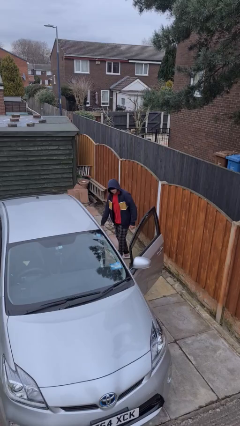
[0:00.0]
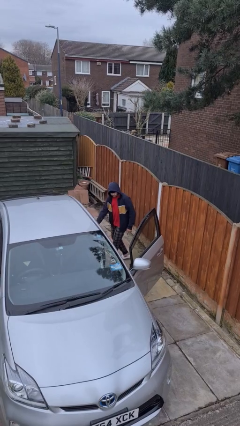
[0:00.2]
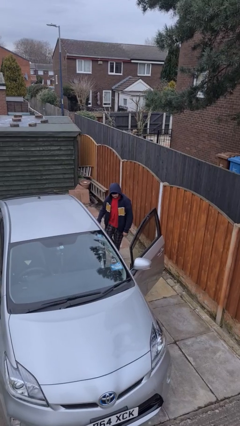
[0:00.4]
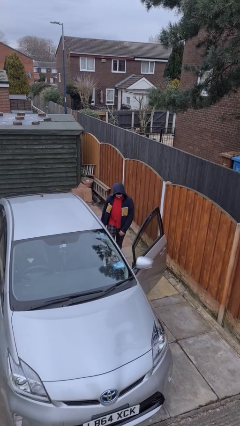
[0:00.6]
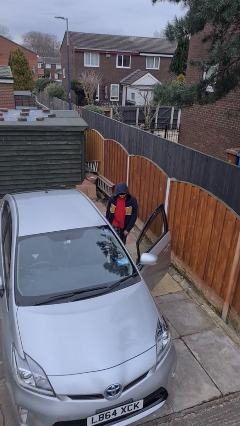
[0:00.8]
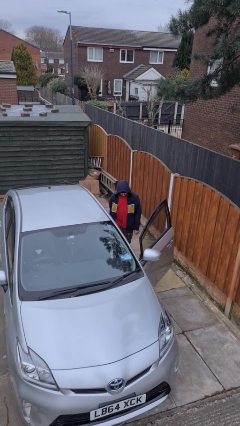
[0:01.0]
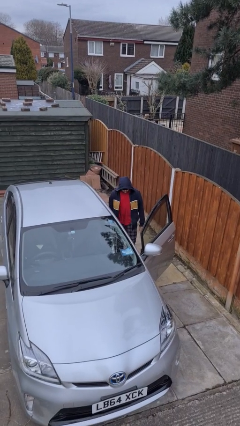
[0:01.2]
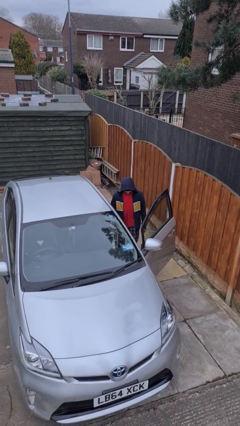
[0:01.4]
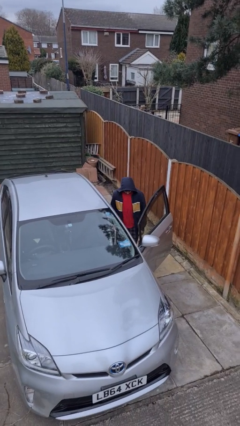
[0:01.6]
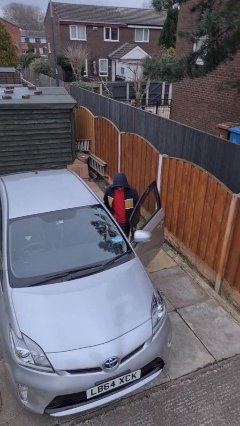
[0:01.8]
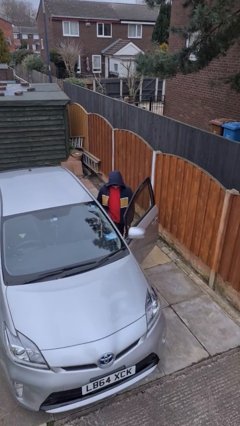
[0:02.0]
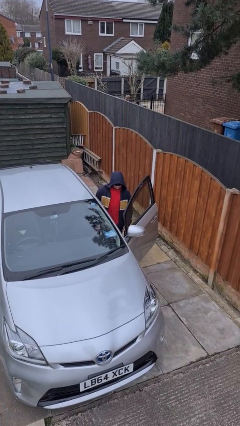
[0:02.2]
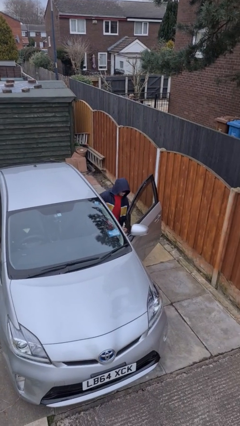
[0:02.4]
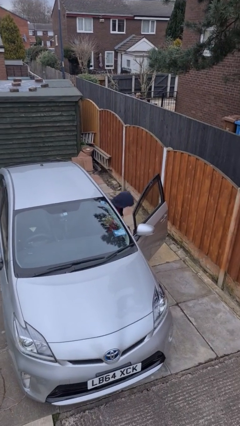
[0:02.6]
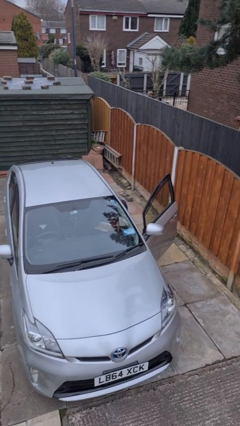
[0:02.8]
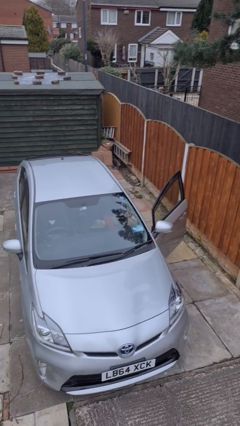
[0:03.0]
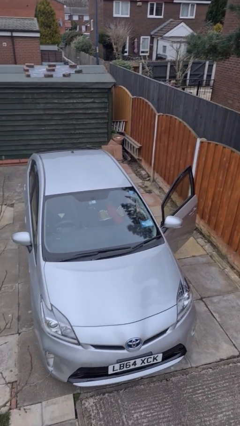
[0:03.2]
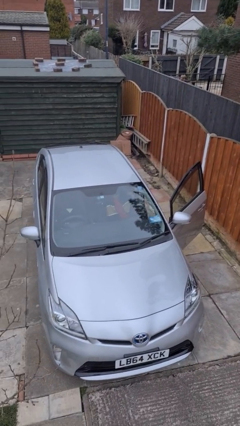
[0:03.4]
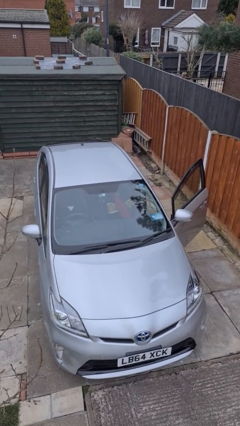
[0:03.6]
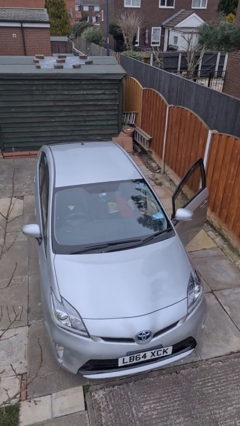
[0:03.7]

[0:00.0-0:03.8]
person enters car

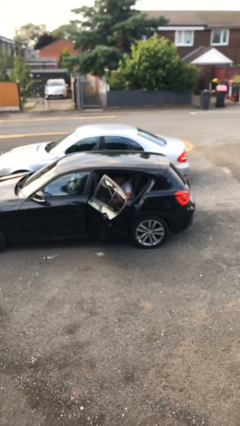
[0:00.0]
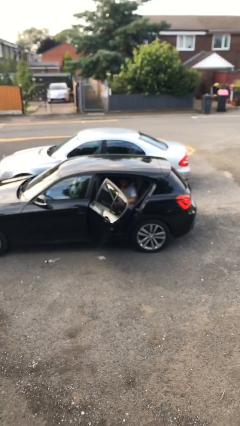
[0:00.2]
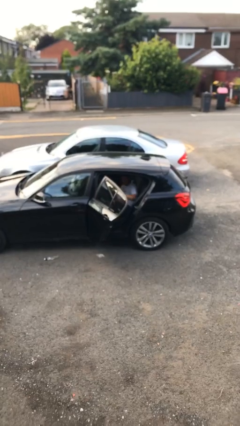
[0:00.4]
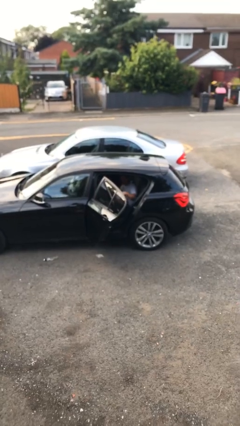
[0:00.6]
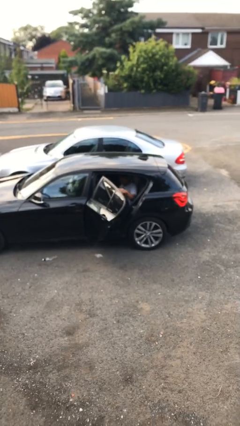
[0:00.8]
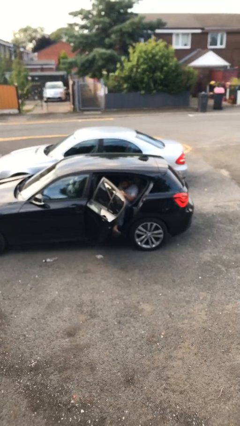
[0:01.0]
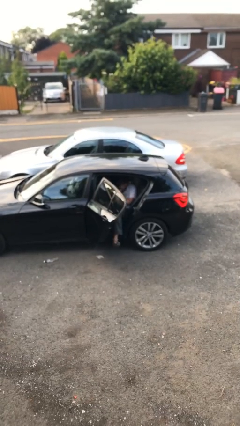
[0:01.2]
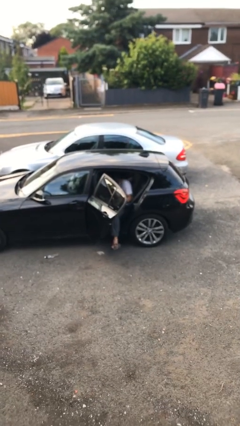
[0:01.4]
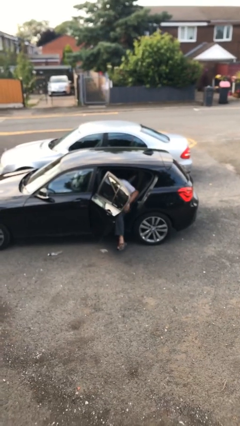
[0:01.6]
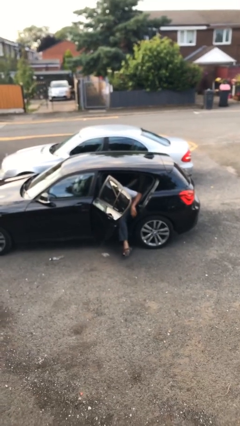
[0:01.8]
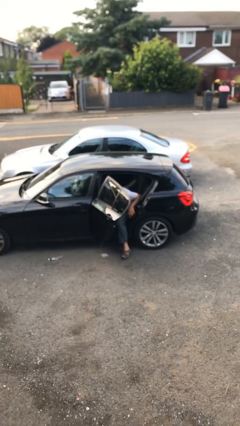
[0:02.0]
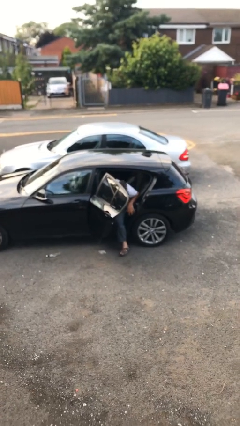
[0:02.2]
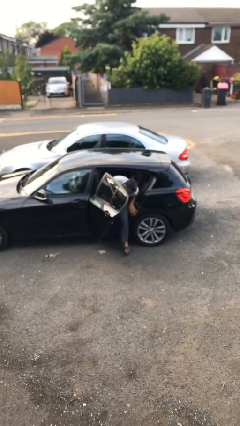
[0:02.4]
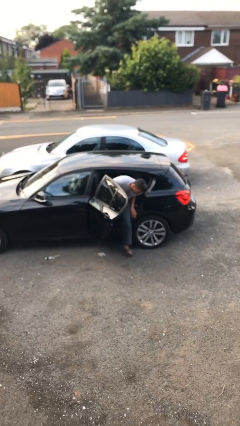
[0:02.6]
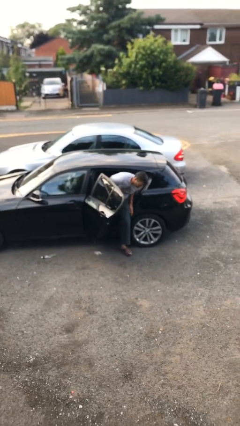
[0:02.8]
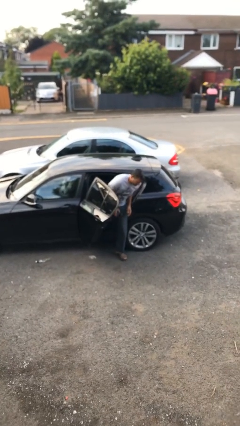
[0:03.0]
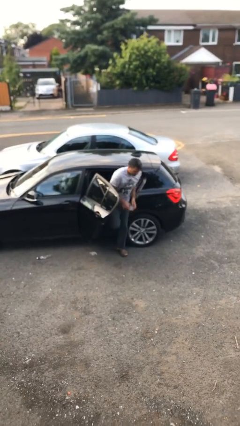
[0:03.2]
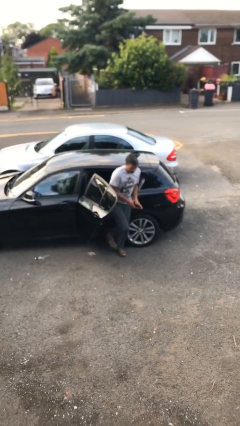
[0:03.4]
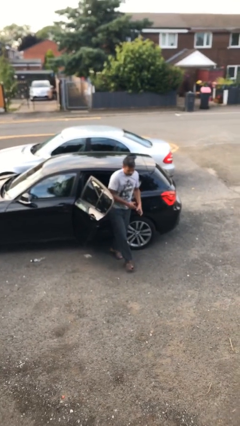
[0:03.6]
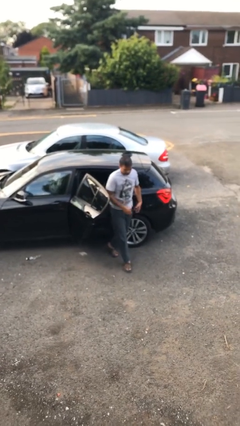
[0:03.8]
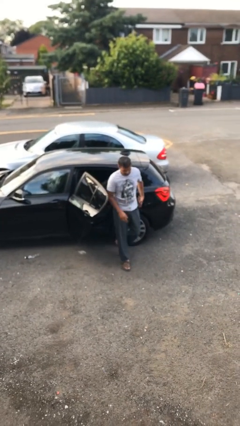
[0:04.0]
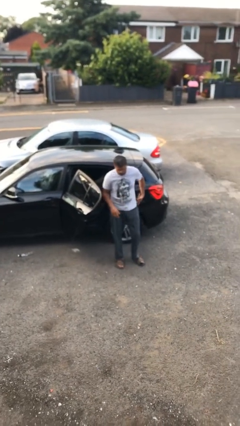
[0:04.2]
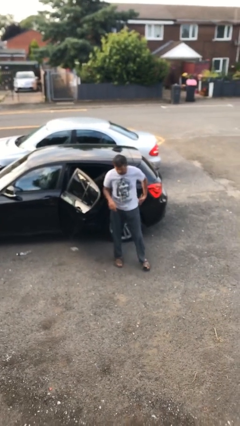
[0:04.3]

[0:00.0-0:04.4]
person exits car

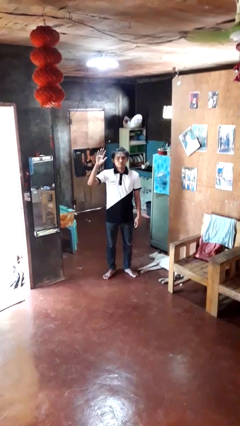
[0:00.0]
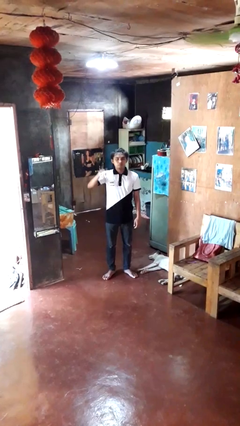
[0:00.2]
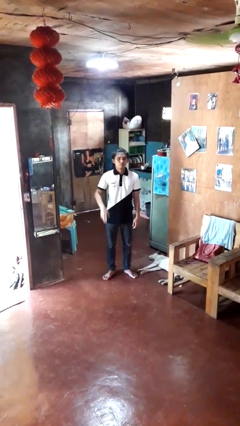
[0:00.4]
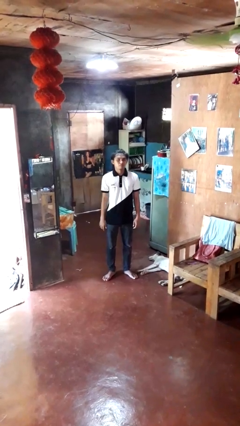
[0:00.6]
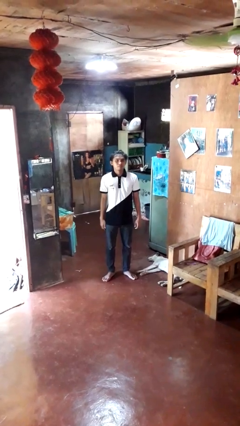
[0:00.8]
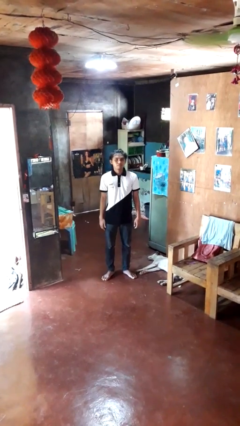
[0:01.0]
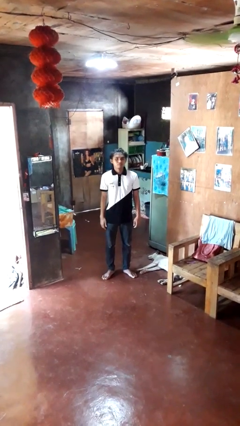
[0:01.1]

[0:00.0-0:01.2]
person gestures lower hand

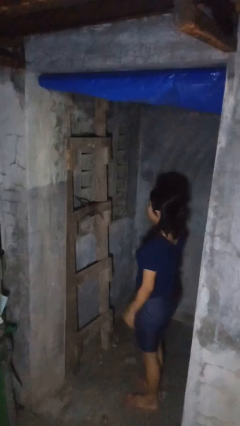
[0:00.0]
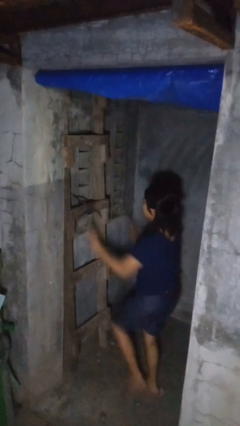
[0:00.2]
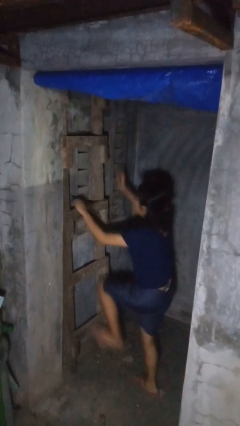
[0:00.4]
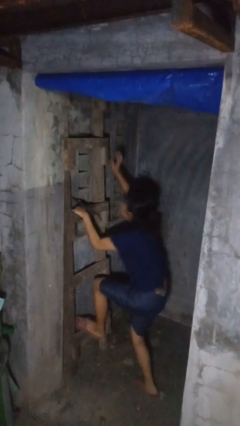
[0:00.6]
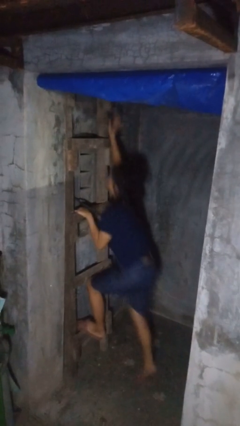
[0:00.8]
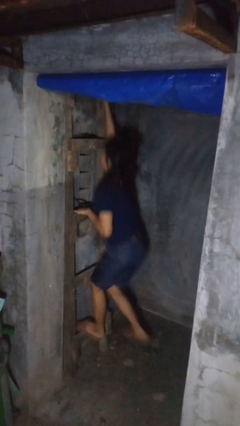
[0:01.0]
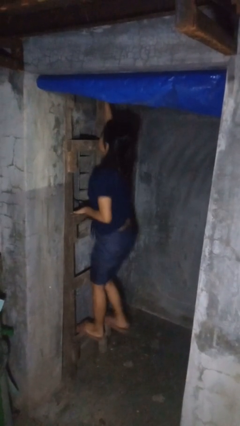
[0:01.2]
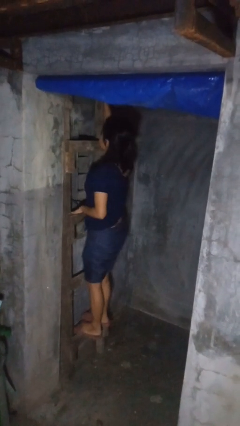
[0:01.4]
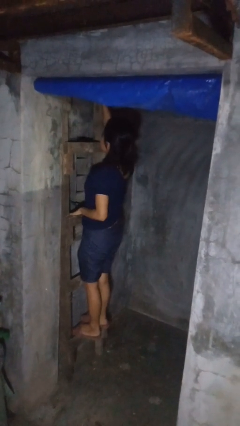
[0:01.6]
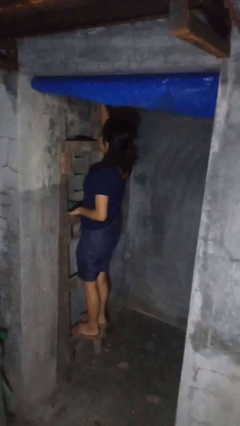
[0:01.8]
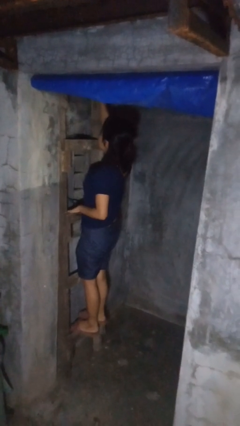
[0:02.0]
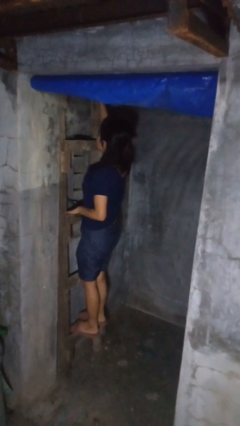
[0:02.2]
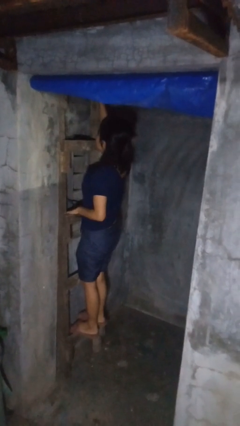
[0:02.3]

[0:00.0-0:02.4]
person climbs up ladder

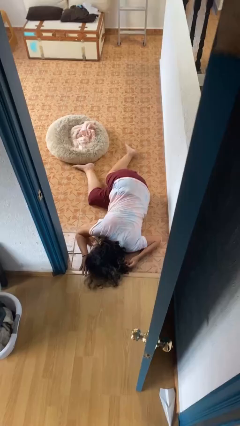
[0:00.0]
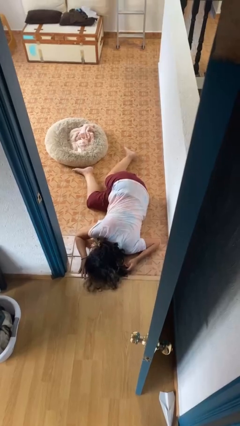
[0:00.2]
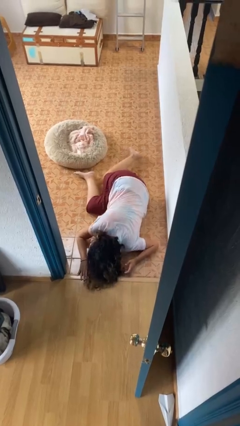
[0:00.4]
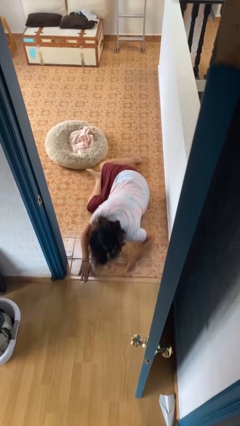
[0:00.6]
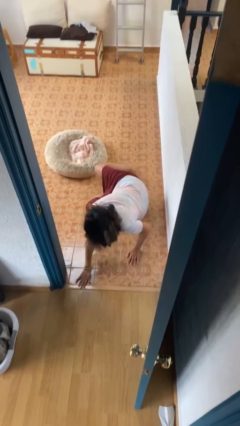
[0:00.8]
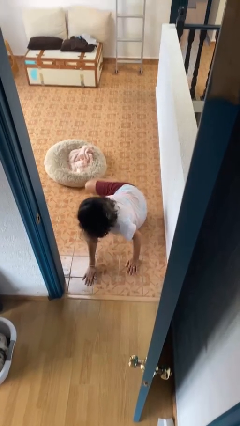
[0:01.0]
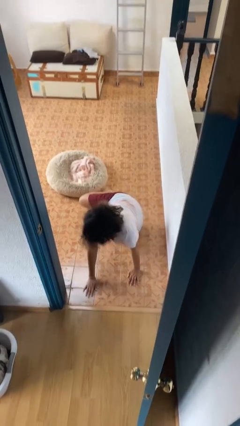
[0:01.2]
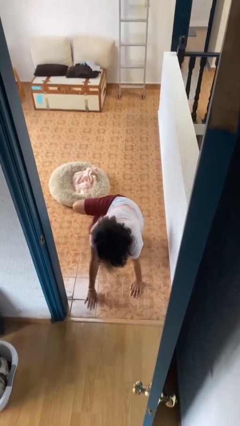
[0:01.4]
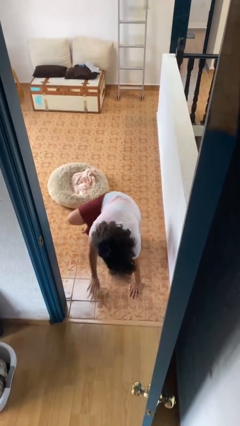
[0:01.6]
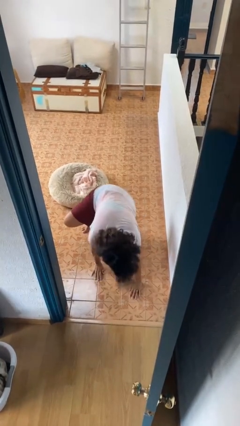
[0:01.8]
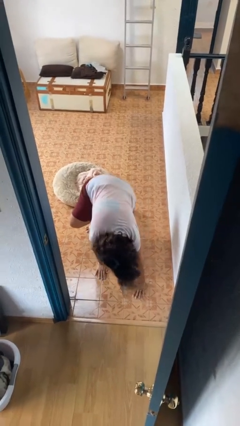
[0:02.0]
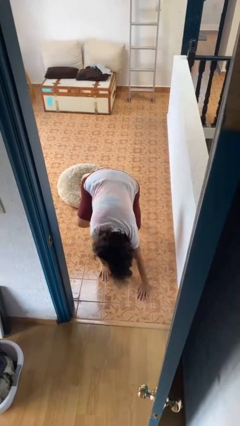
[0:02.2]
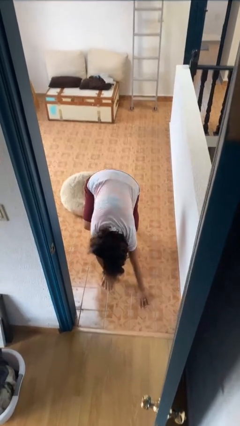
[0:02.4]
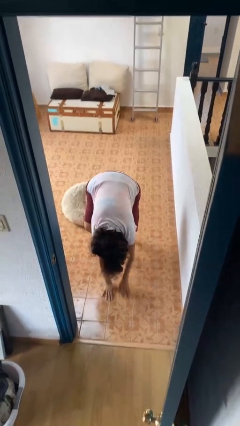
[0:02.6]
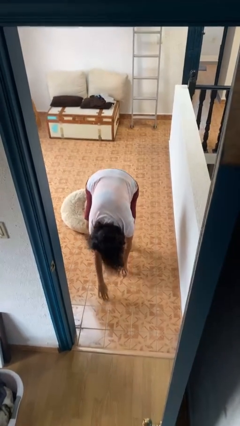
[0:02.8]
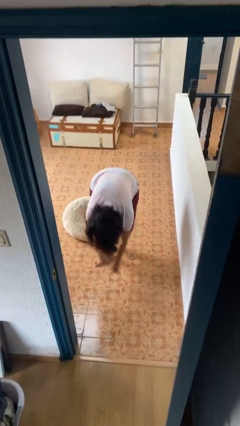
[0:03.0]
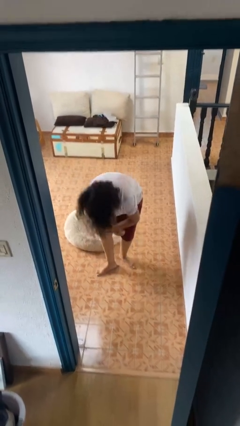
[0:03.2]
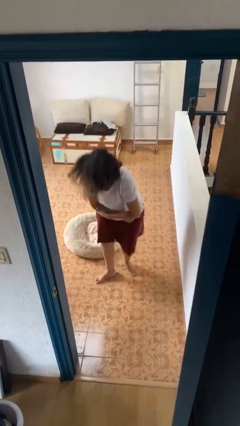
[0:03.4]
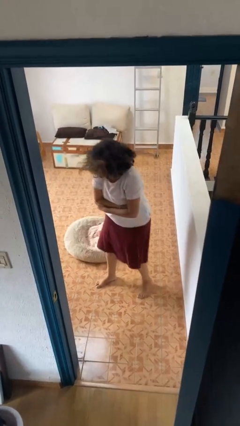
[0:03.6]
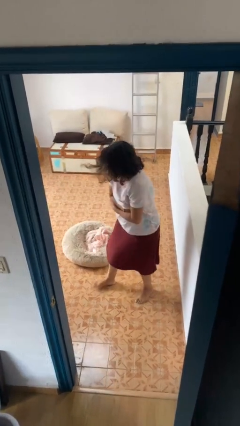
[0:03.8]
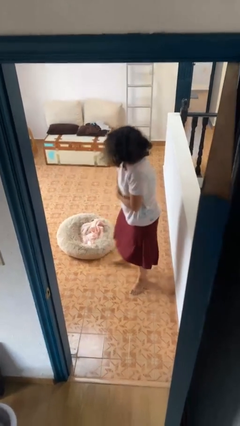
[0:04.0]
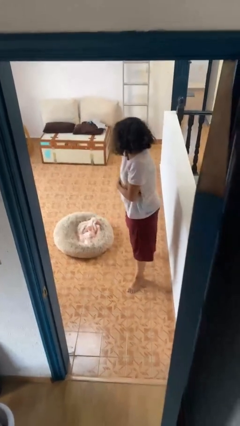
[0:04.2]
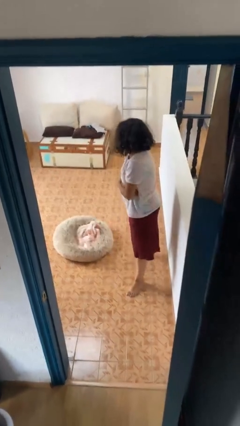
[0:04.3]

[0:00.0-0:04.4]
person stands up from floor

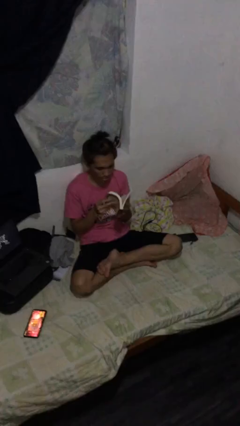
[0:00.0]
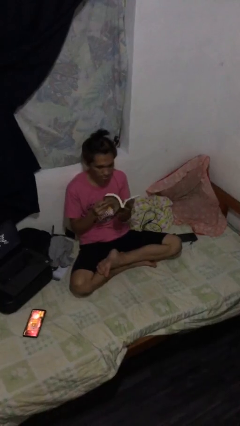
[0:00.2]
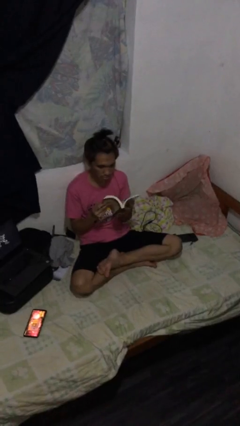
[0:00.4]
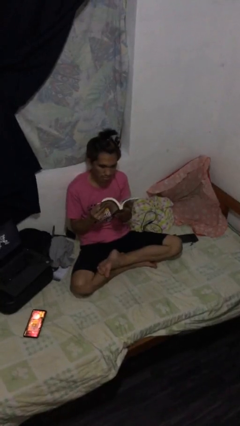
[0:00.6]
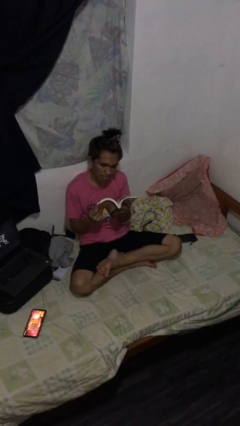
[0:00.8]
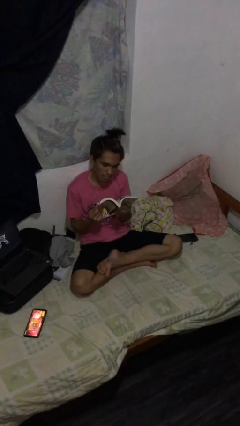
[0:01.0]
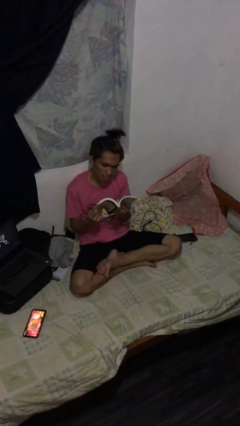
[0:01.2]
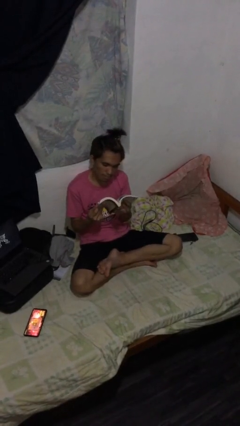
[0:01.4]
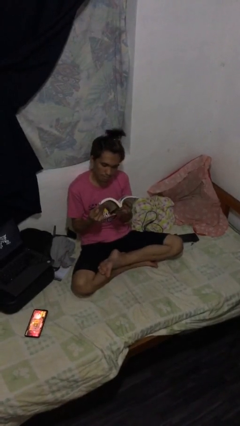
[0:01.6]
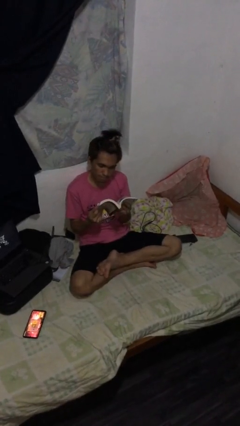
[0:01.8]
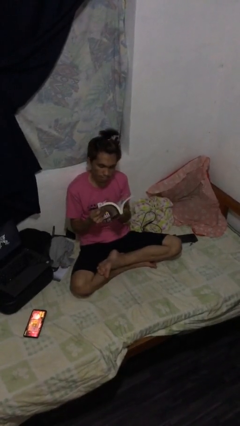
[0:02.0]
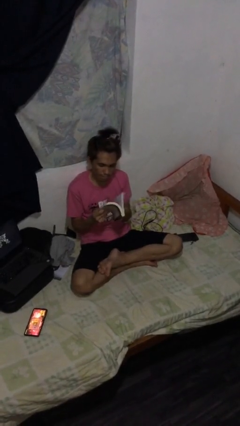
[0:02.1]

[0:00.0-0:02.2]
person reads document
